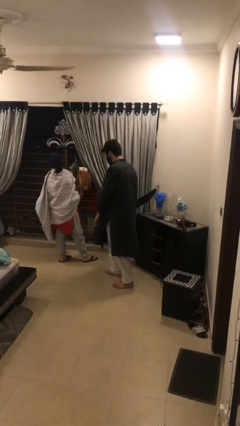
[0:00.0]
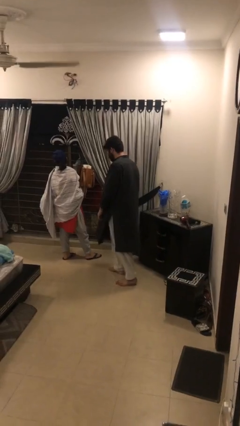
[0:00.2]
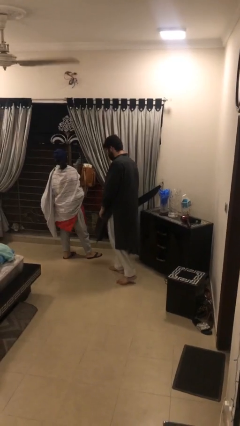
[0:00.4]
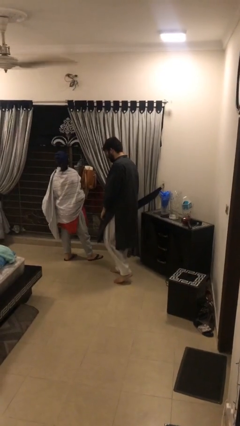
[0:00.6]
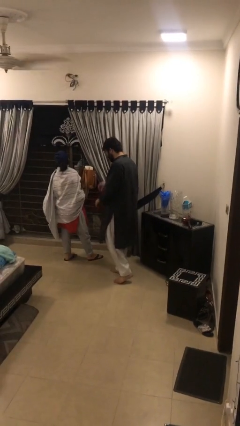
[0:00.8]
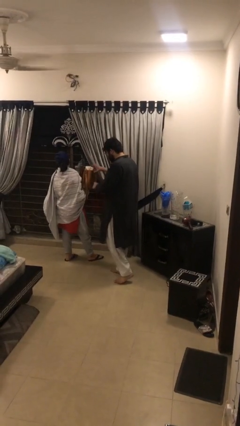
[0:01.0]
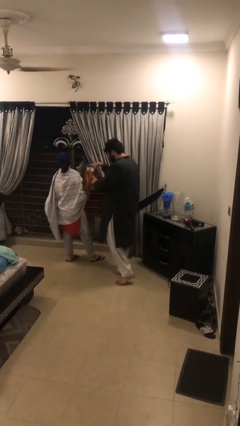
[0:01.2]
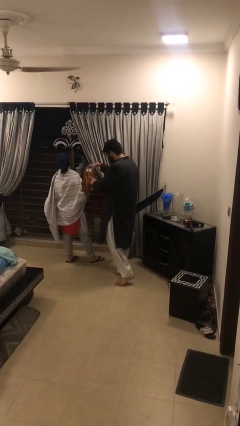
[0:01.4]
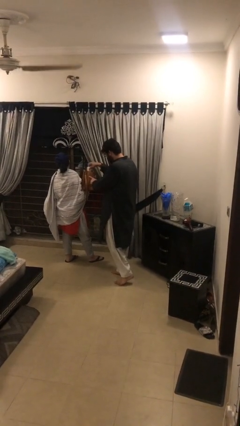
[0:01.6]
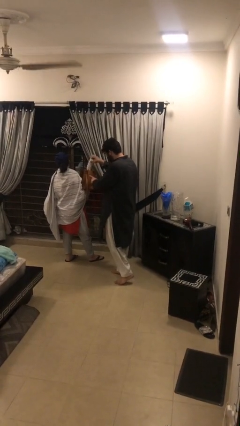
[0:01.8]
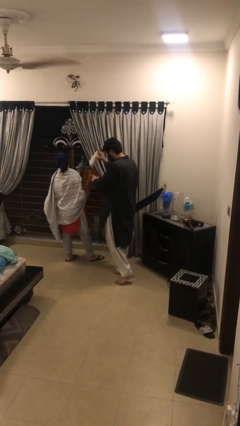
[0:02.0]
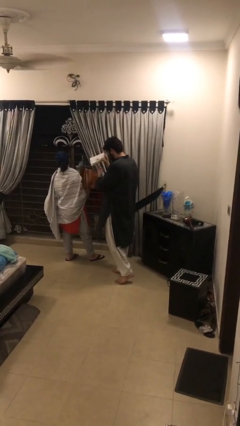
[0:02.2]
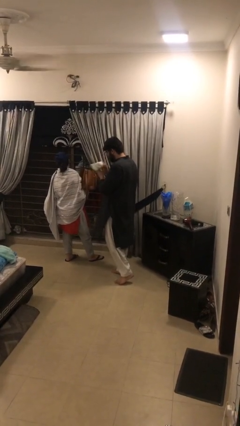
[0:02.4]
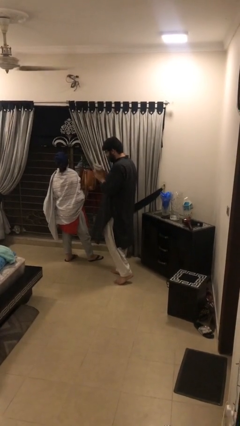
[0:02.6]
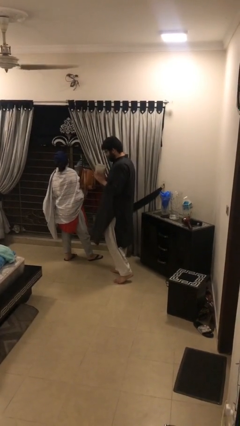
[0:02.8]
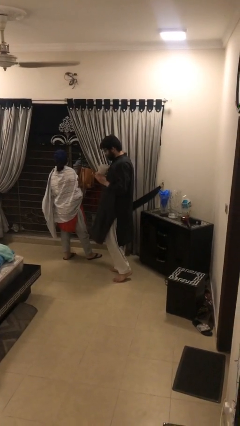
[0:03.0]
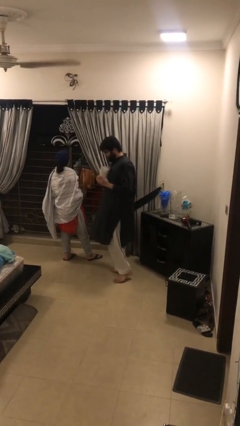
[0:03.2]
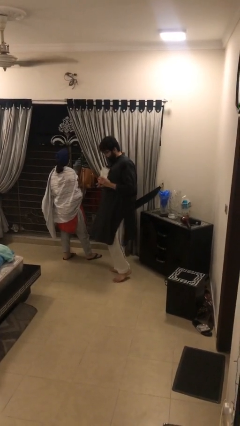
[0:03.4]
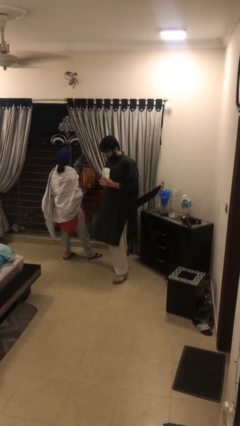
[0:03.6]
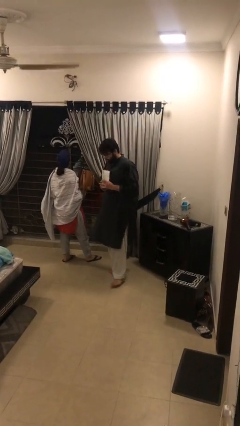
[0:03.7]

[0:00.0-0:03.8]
person steals object from person

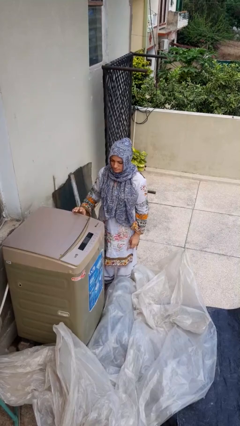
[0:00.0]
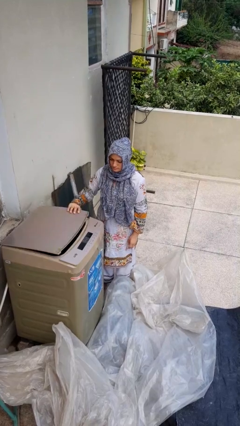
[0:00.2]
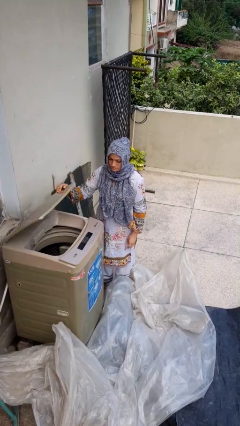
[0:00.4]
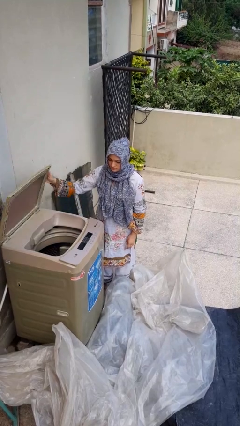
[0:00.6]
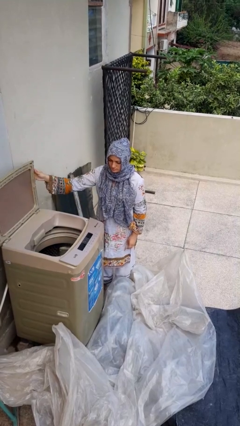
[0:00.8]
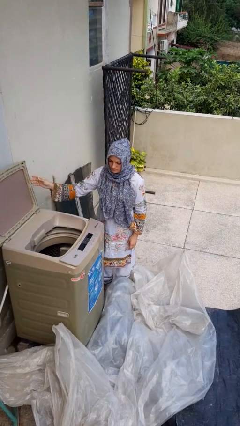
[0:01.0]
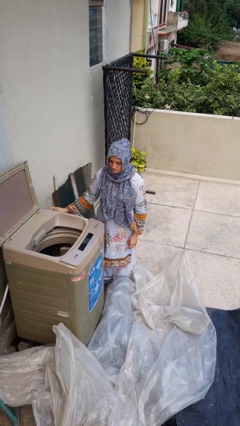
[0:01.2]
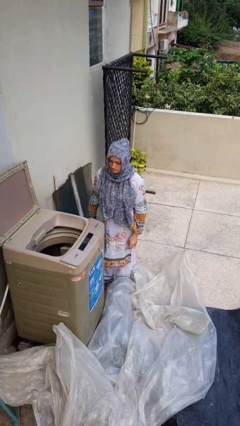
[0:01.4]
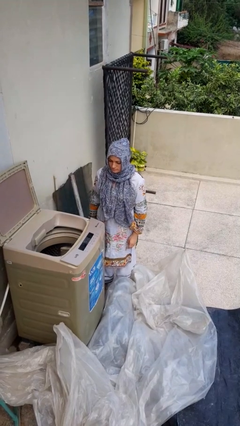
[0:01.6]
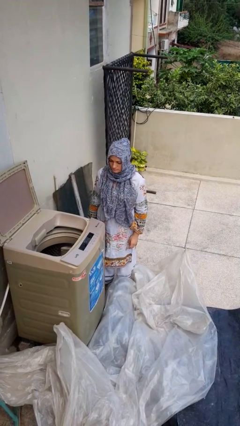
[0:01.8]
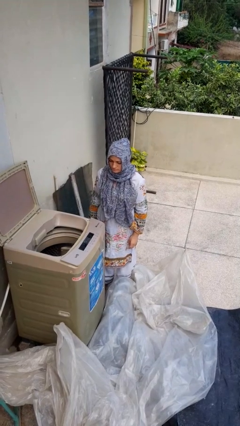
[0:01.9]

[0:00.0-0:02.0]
person opens clothes washer

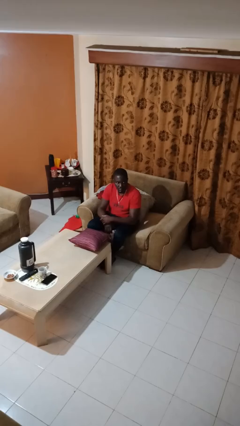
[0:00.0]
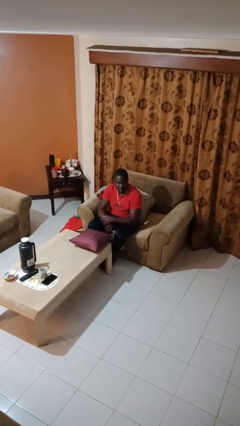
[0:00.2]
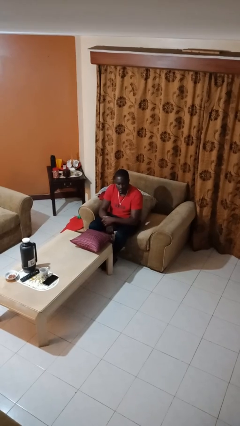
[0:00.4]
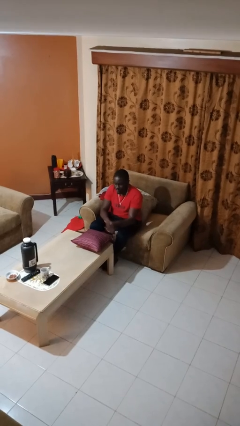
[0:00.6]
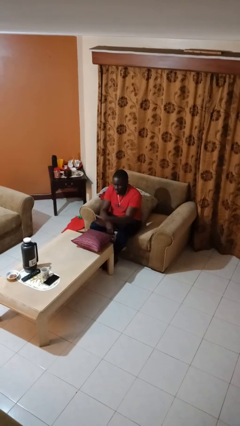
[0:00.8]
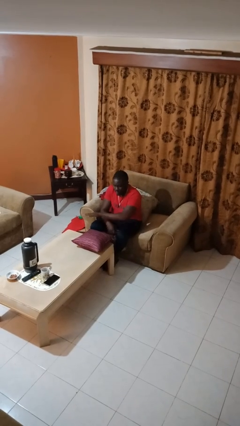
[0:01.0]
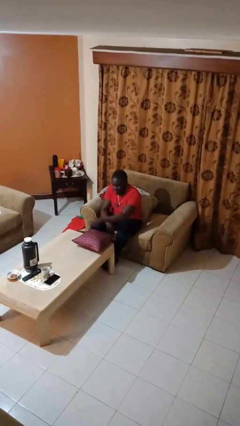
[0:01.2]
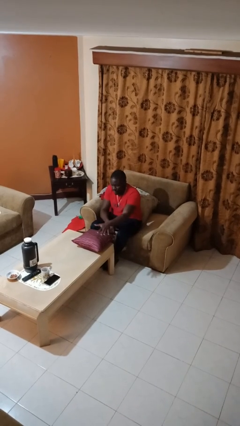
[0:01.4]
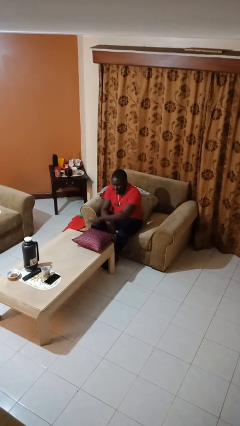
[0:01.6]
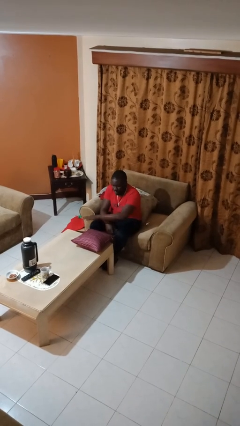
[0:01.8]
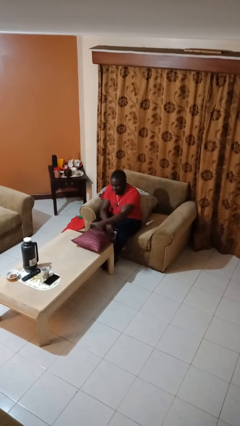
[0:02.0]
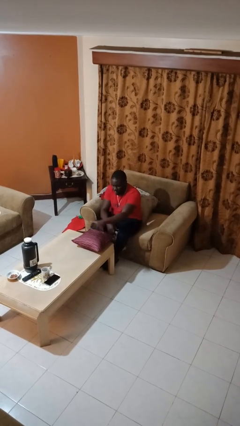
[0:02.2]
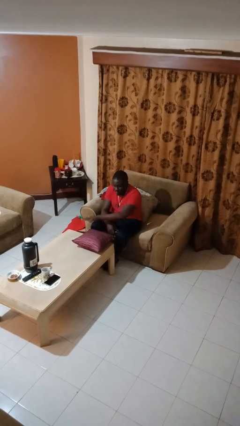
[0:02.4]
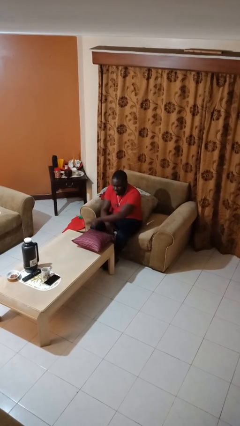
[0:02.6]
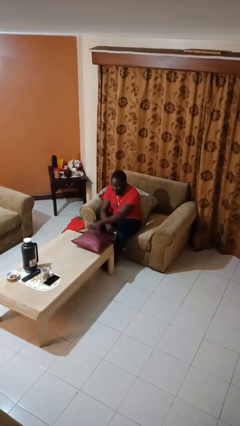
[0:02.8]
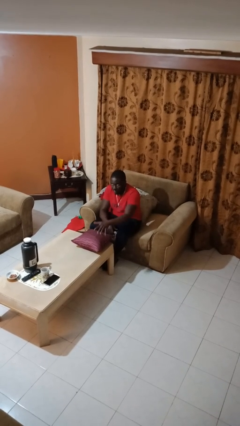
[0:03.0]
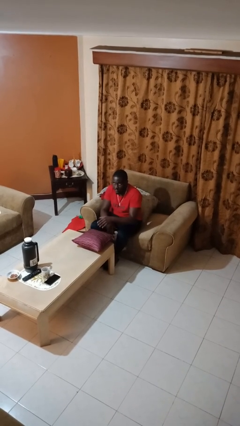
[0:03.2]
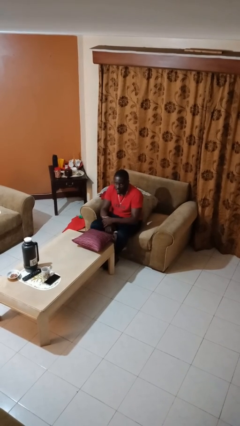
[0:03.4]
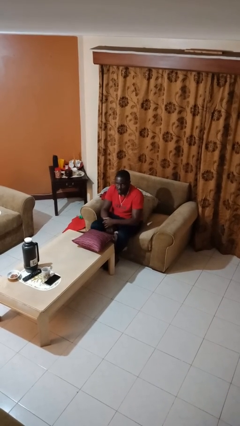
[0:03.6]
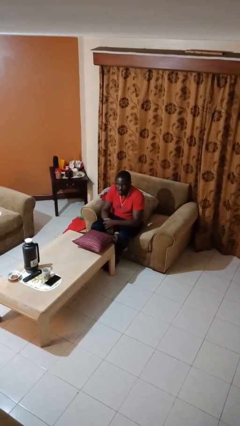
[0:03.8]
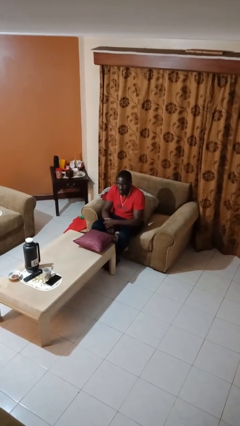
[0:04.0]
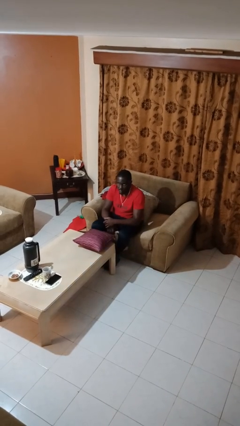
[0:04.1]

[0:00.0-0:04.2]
person waves hand over object

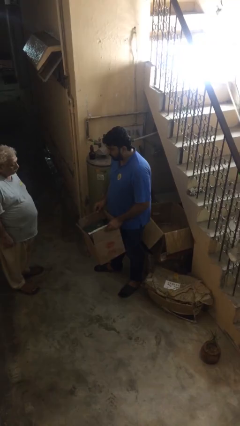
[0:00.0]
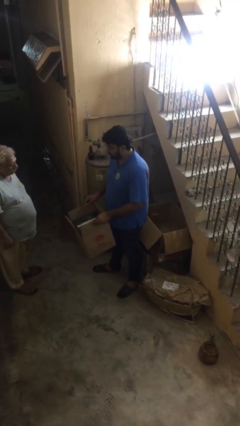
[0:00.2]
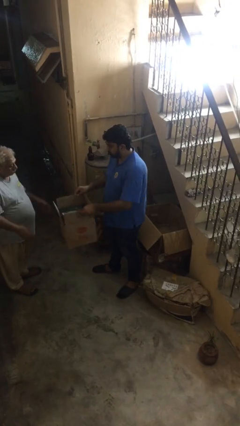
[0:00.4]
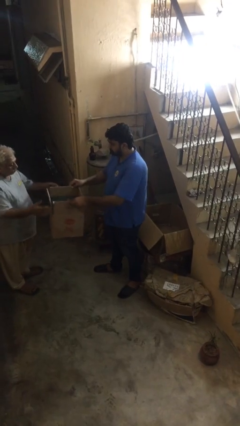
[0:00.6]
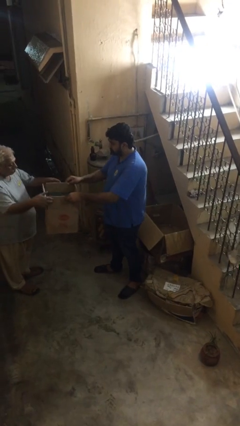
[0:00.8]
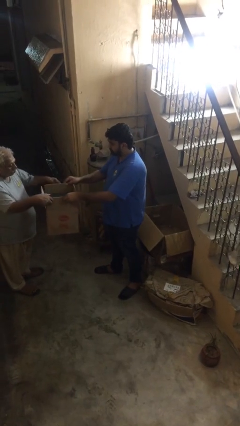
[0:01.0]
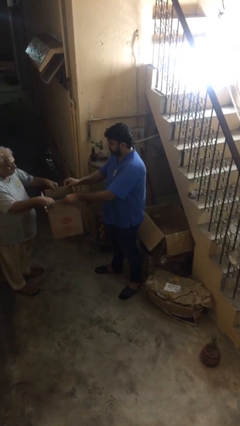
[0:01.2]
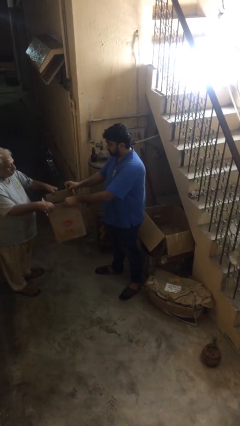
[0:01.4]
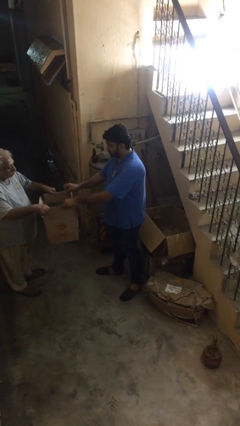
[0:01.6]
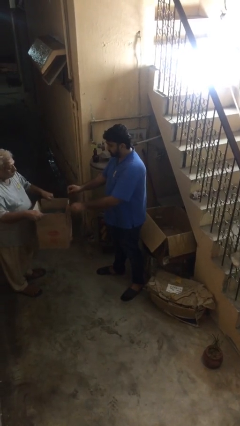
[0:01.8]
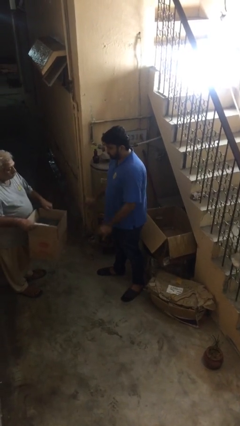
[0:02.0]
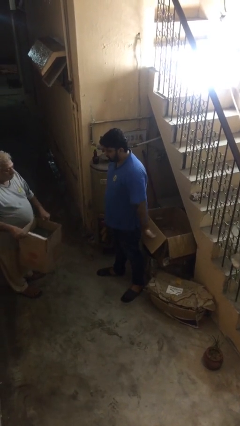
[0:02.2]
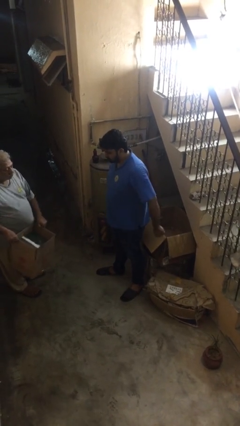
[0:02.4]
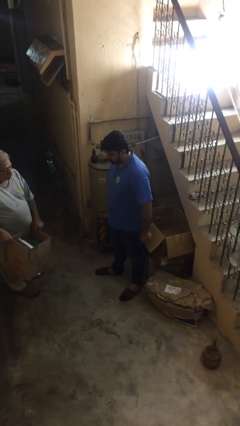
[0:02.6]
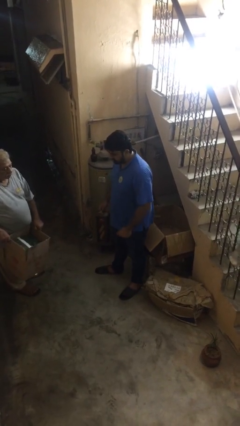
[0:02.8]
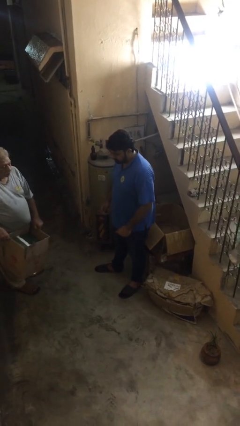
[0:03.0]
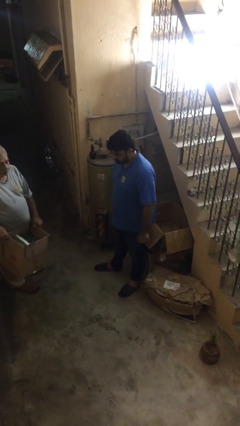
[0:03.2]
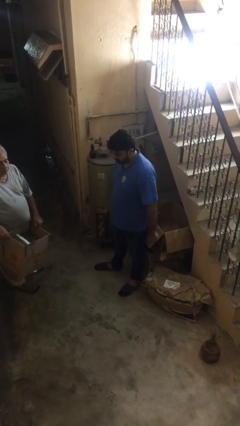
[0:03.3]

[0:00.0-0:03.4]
person transfers object to person

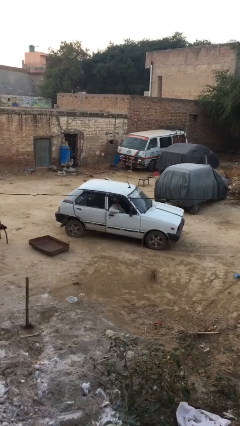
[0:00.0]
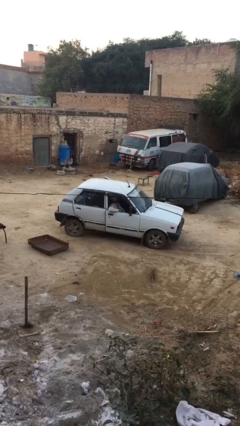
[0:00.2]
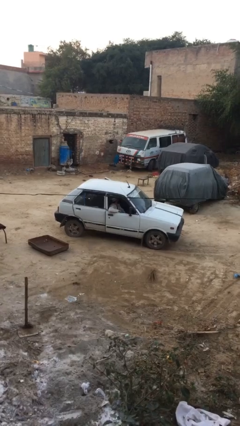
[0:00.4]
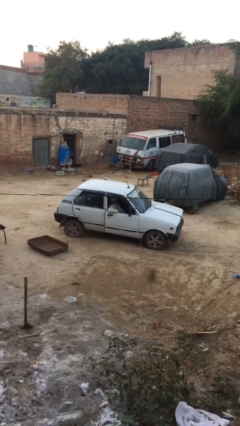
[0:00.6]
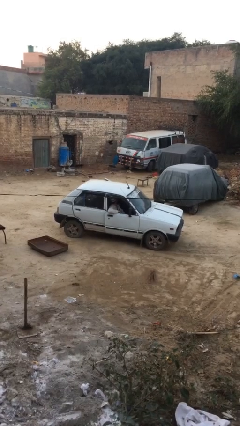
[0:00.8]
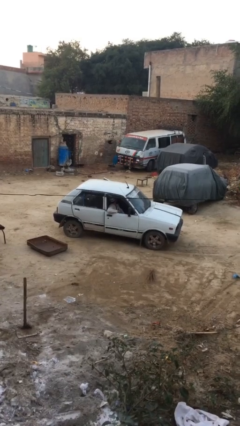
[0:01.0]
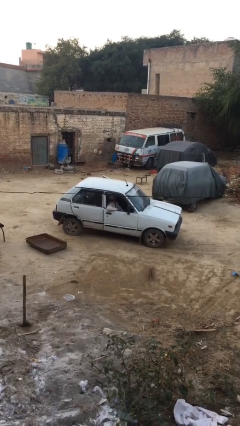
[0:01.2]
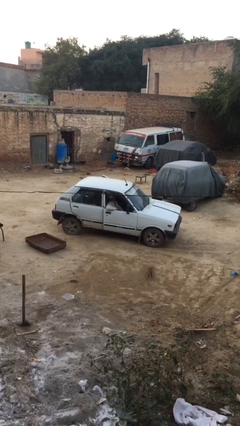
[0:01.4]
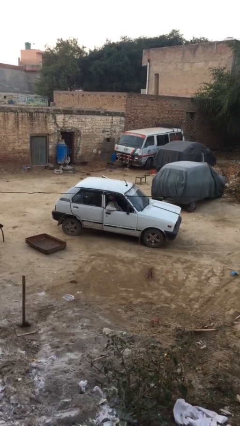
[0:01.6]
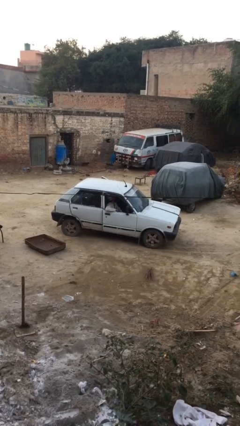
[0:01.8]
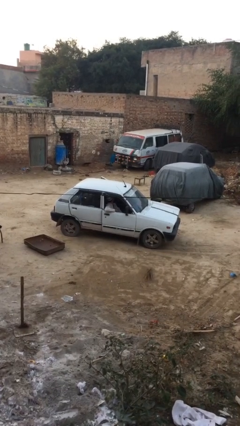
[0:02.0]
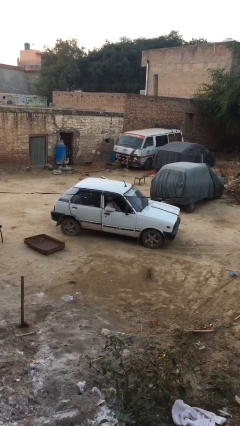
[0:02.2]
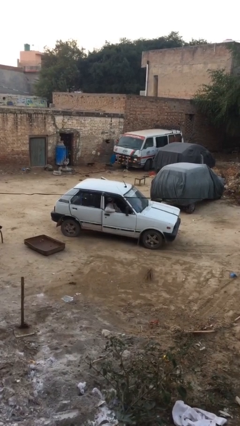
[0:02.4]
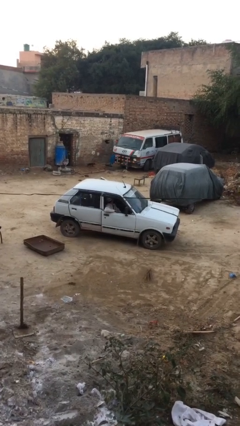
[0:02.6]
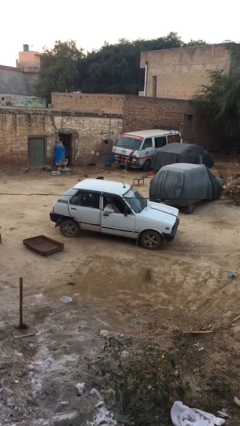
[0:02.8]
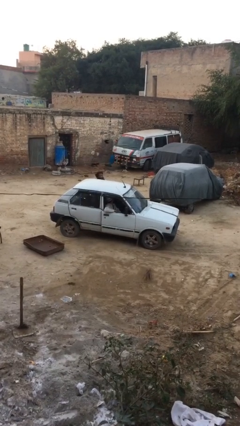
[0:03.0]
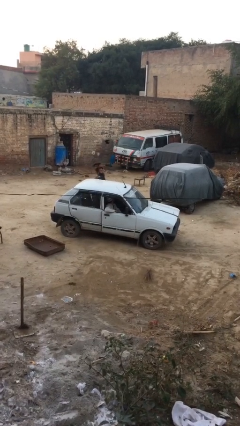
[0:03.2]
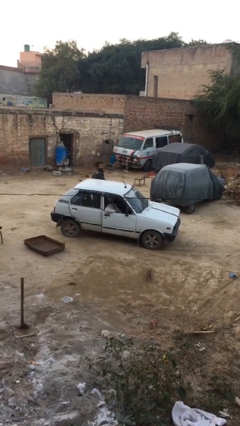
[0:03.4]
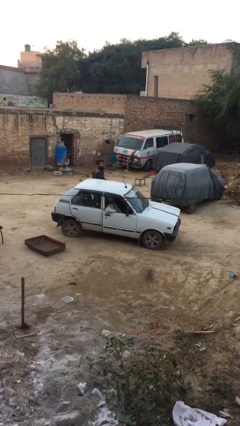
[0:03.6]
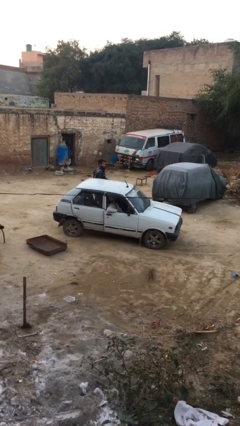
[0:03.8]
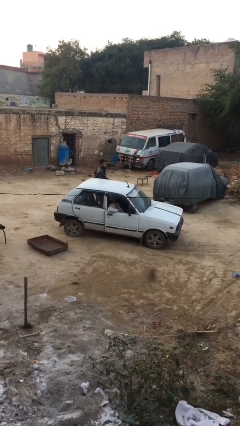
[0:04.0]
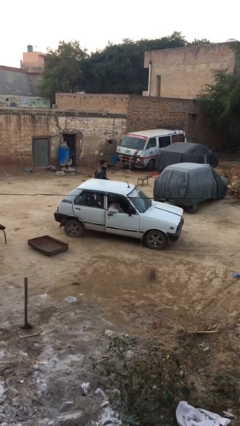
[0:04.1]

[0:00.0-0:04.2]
car drops off person
